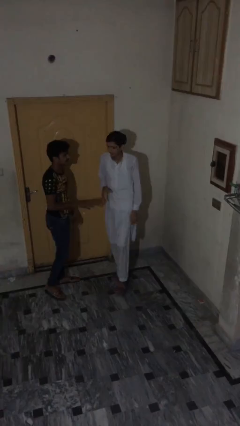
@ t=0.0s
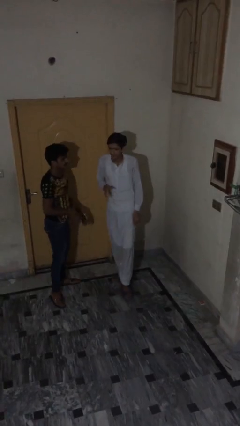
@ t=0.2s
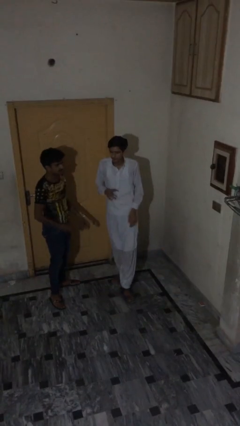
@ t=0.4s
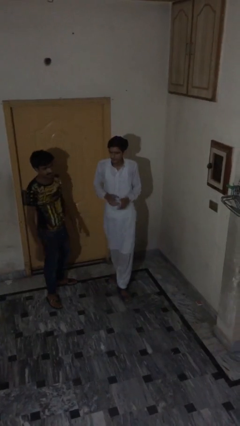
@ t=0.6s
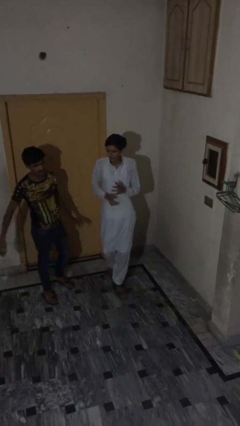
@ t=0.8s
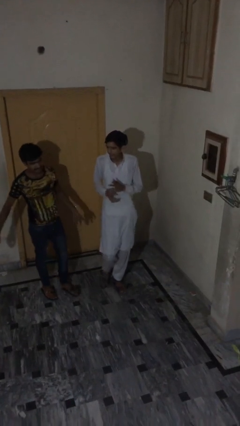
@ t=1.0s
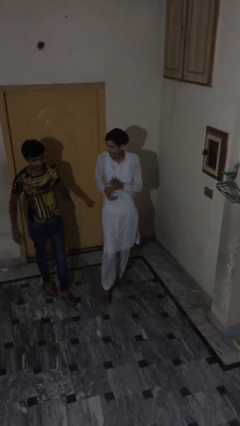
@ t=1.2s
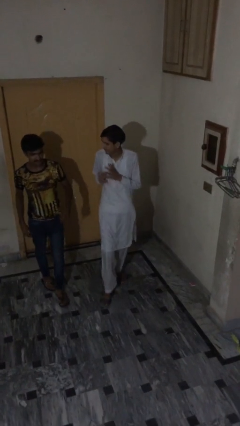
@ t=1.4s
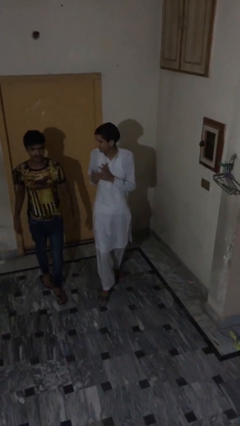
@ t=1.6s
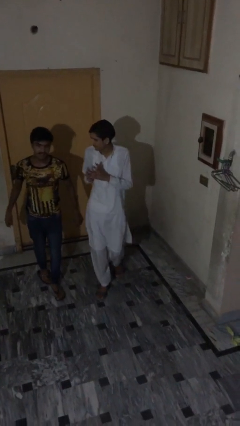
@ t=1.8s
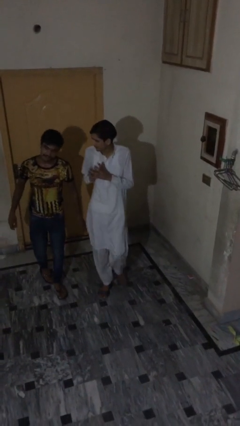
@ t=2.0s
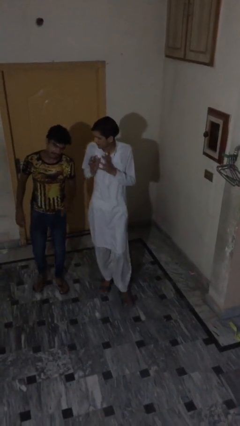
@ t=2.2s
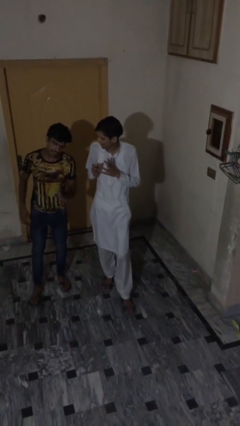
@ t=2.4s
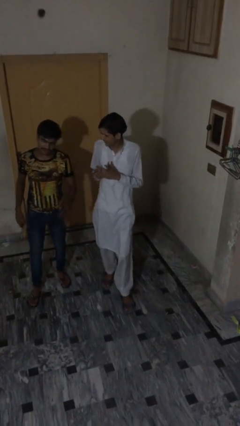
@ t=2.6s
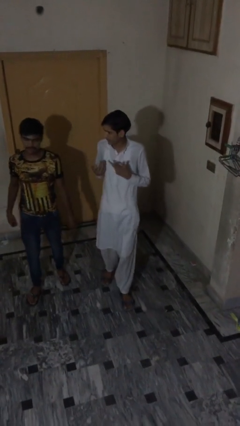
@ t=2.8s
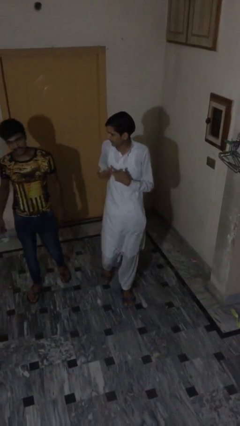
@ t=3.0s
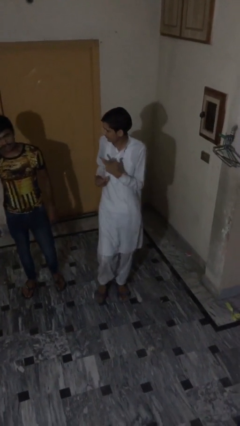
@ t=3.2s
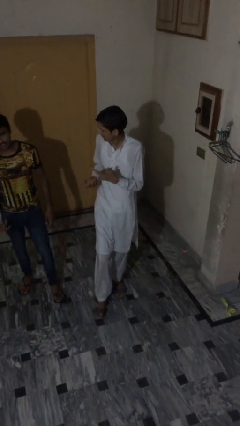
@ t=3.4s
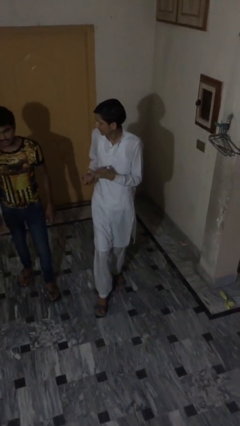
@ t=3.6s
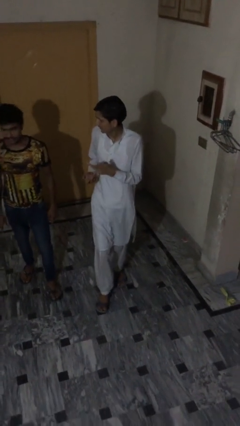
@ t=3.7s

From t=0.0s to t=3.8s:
person talks to person

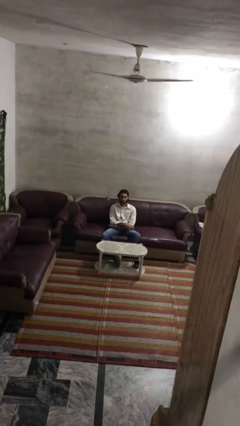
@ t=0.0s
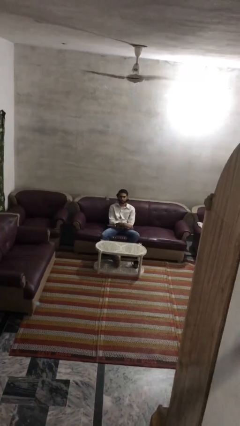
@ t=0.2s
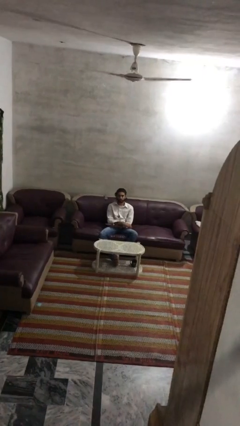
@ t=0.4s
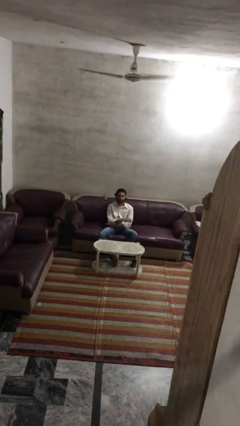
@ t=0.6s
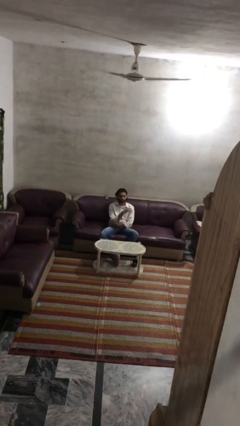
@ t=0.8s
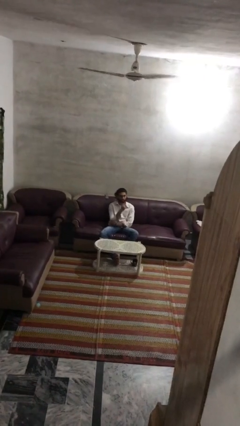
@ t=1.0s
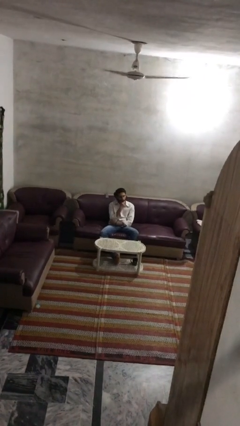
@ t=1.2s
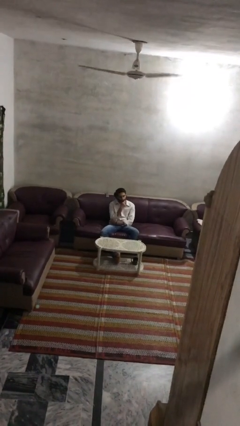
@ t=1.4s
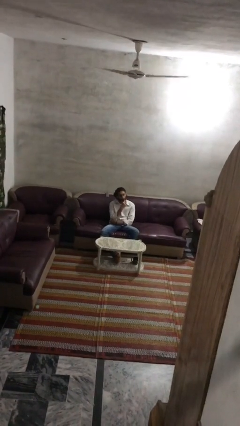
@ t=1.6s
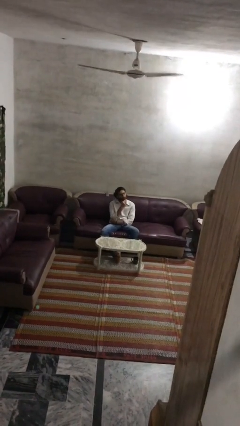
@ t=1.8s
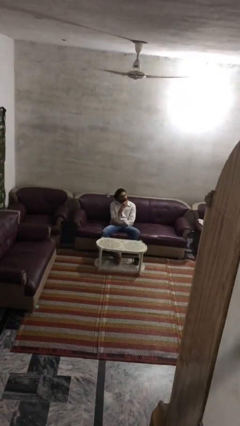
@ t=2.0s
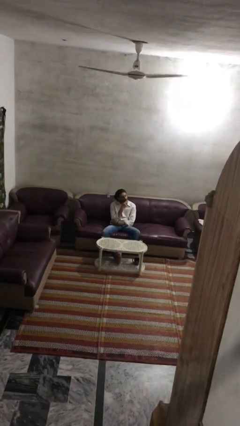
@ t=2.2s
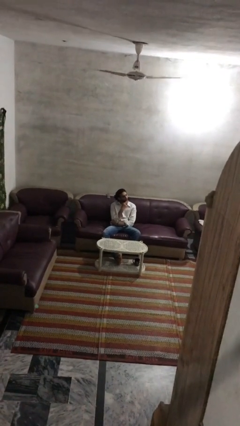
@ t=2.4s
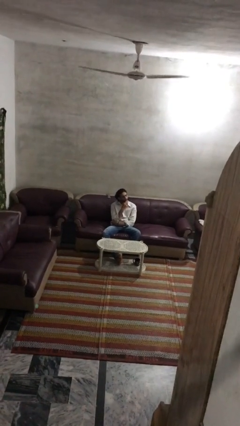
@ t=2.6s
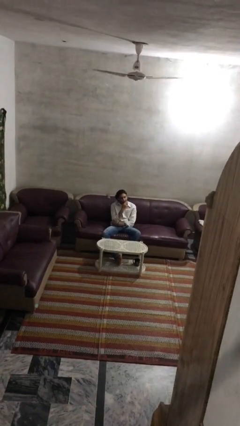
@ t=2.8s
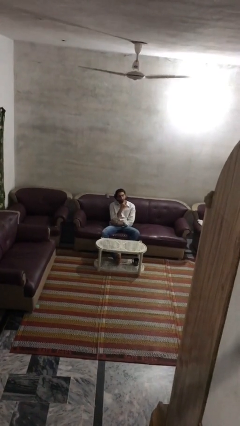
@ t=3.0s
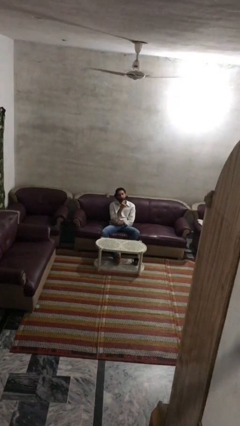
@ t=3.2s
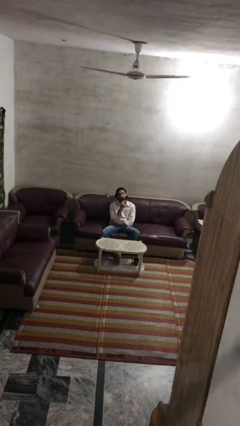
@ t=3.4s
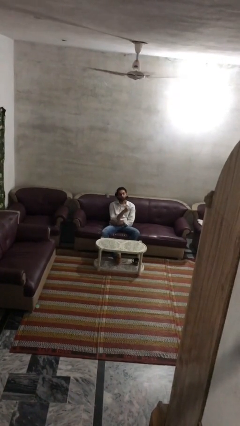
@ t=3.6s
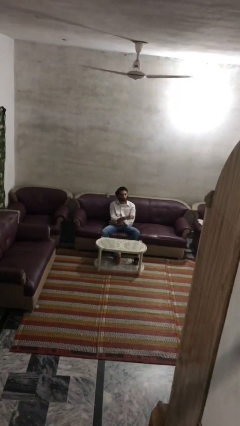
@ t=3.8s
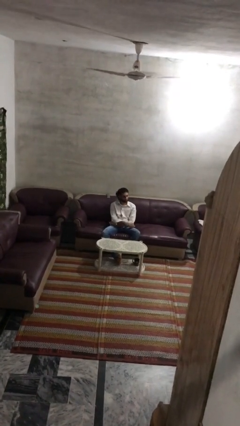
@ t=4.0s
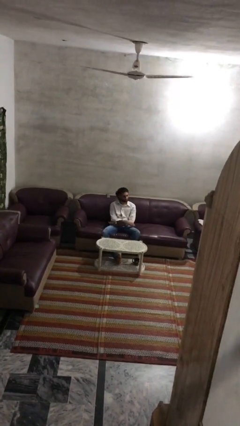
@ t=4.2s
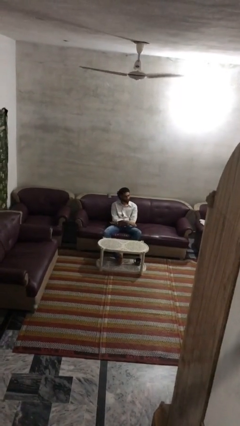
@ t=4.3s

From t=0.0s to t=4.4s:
person strokes chin

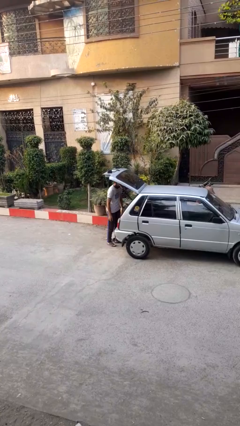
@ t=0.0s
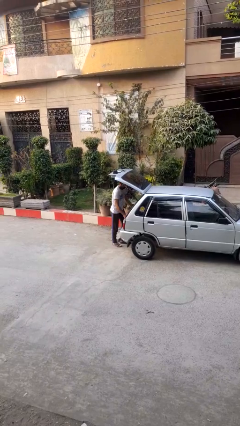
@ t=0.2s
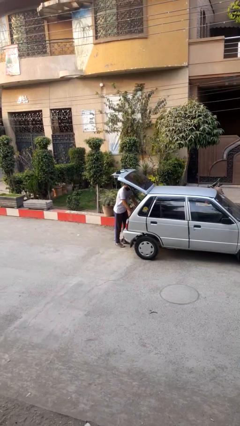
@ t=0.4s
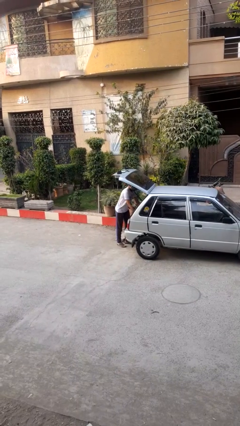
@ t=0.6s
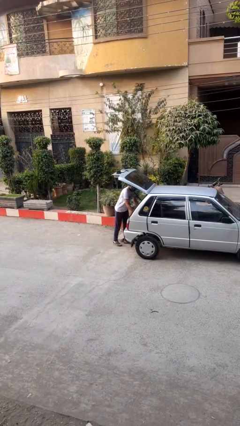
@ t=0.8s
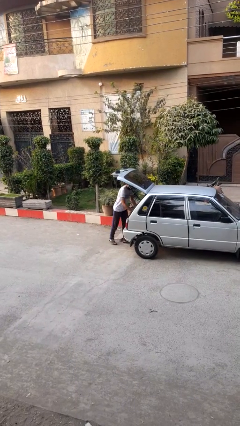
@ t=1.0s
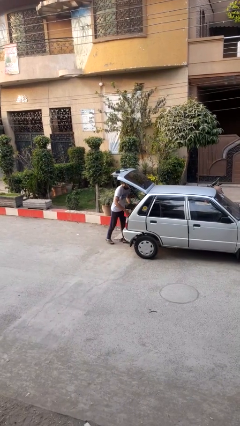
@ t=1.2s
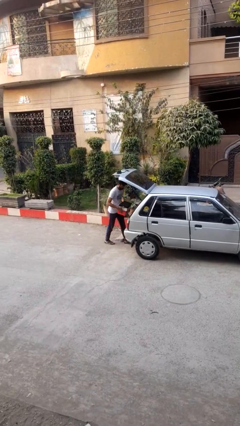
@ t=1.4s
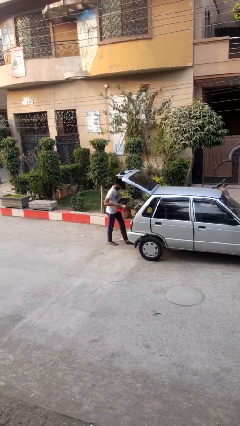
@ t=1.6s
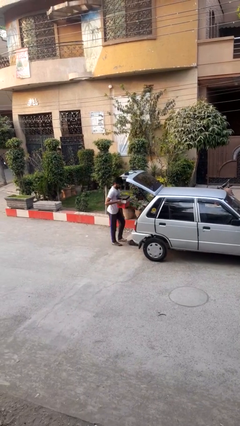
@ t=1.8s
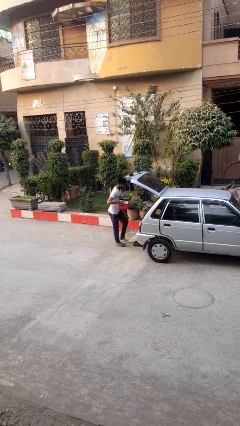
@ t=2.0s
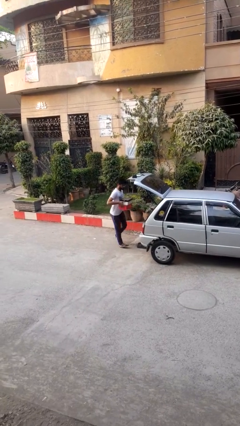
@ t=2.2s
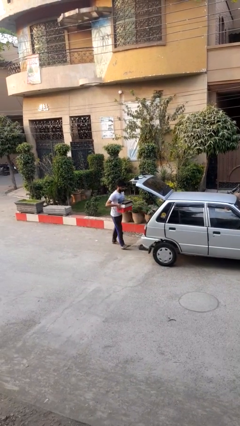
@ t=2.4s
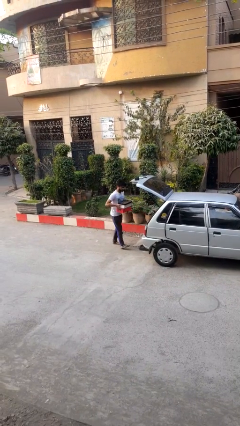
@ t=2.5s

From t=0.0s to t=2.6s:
person unloads car

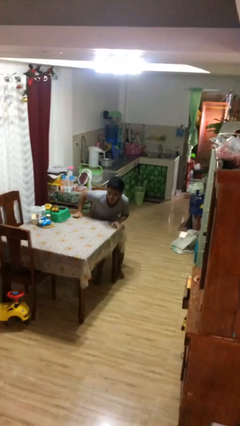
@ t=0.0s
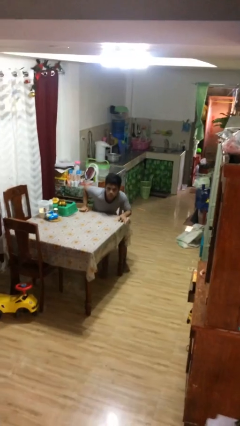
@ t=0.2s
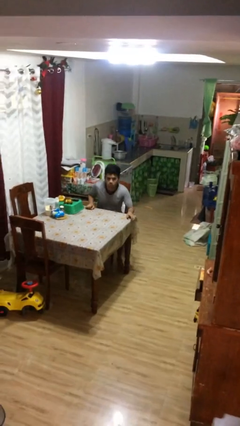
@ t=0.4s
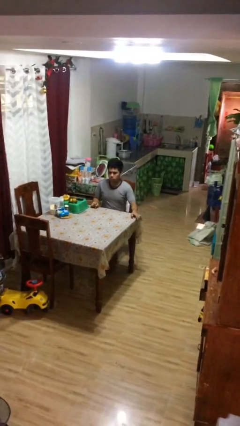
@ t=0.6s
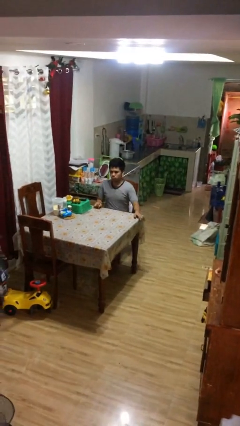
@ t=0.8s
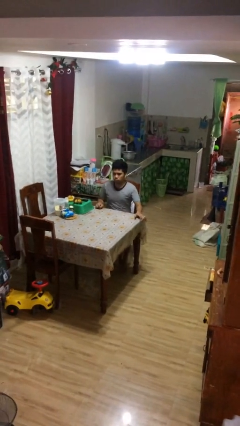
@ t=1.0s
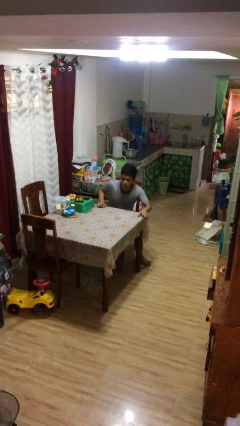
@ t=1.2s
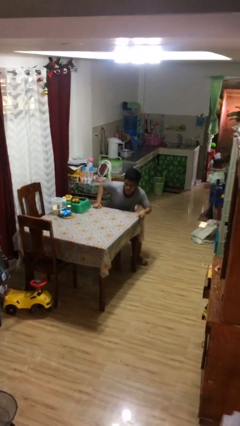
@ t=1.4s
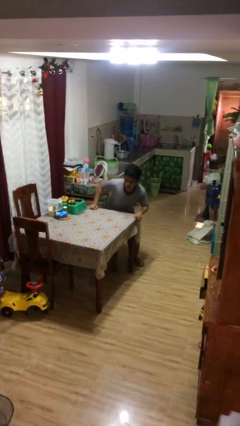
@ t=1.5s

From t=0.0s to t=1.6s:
person sits down

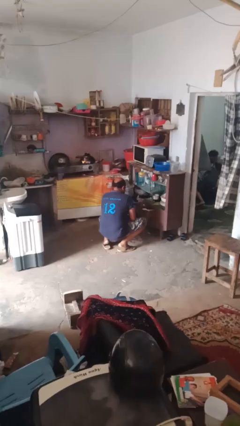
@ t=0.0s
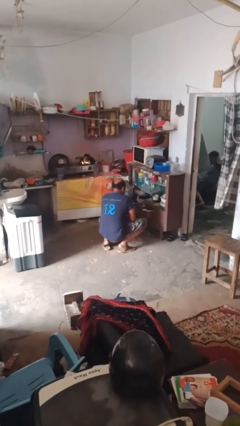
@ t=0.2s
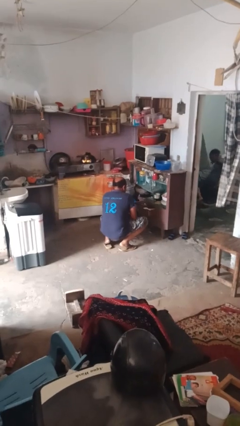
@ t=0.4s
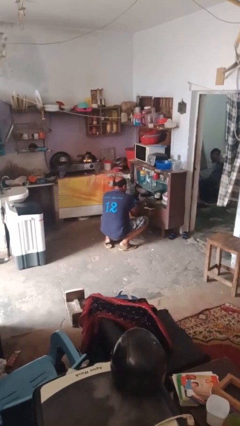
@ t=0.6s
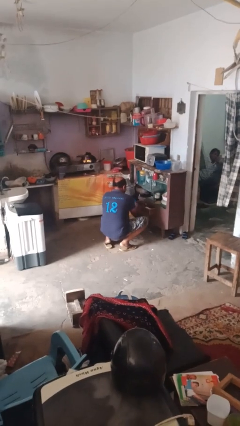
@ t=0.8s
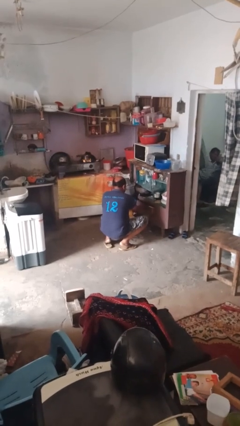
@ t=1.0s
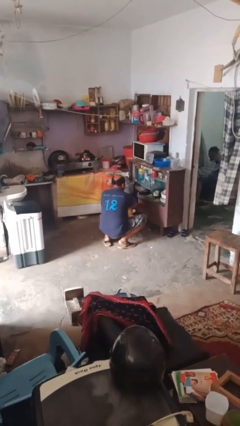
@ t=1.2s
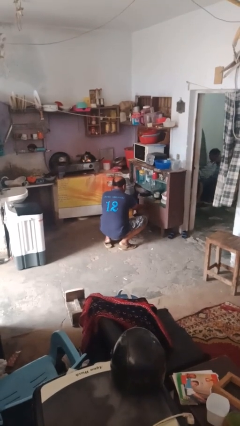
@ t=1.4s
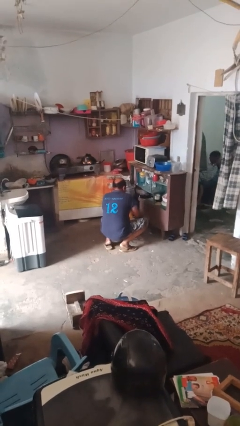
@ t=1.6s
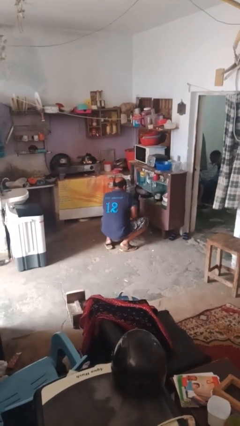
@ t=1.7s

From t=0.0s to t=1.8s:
person closes kitchen drawer

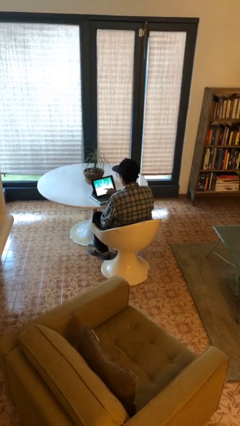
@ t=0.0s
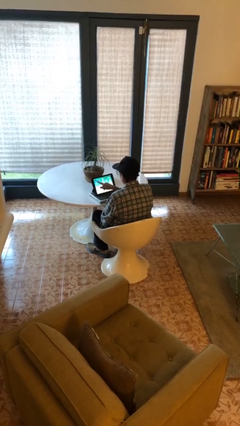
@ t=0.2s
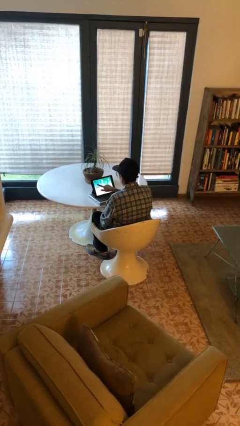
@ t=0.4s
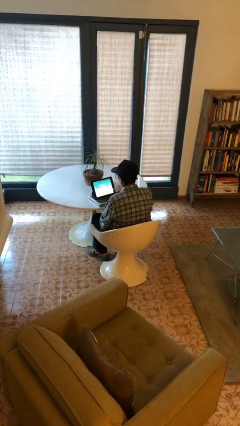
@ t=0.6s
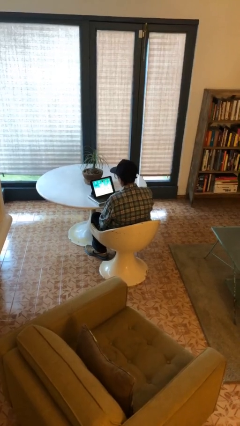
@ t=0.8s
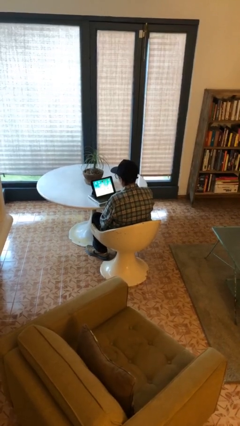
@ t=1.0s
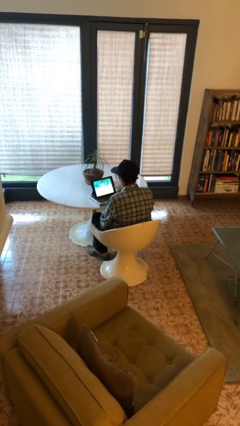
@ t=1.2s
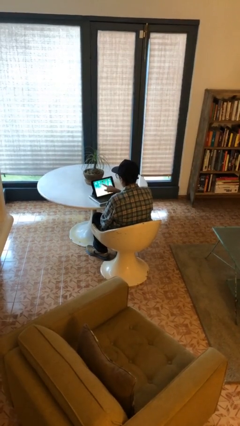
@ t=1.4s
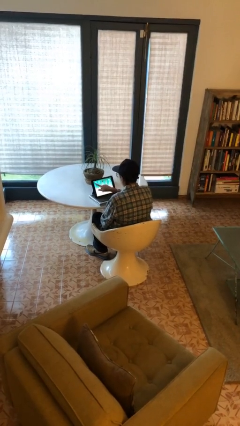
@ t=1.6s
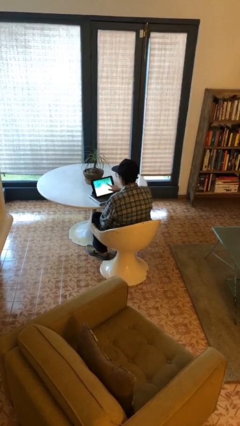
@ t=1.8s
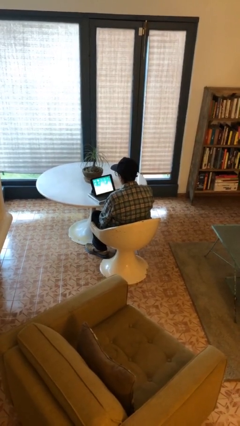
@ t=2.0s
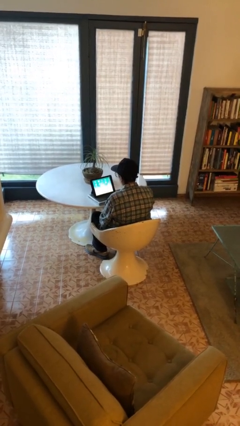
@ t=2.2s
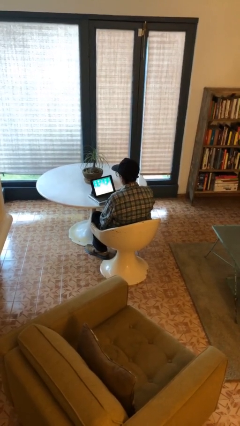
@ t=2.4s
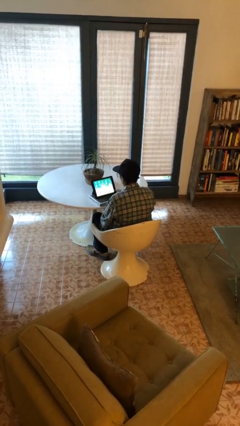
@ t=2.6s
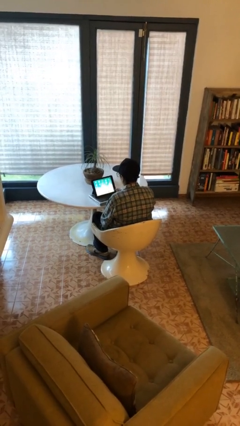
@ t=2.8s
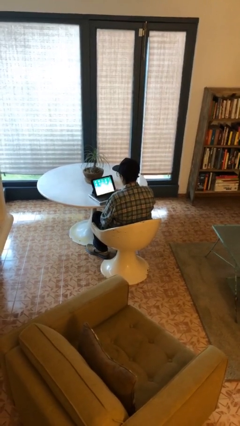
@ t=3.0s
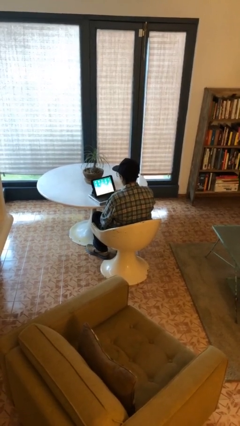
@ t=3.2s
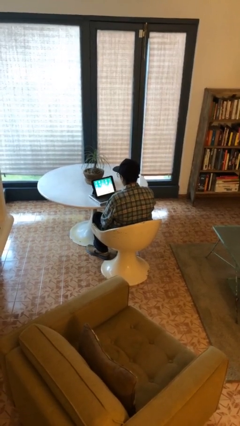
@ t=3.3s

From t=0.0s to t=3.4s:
person interacts with tablet
